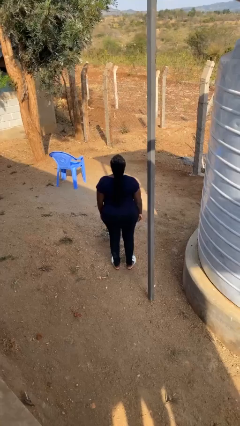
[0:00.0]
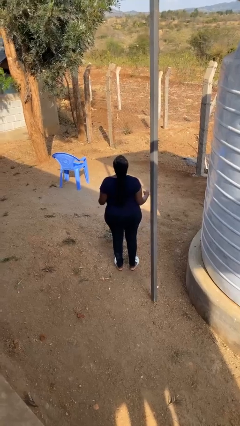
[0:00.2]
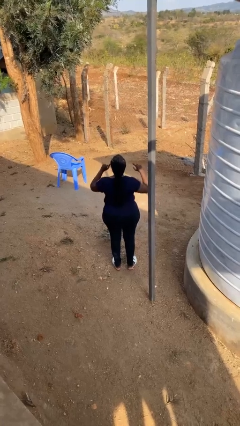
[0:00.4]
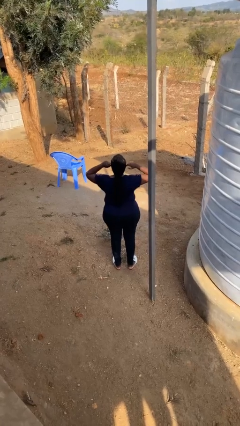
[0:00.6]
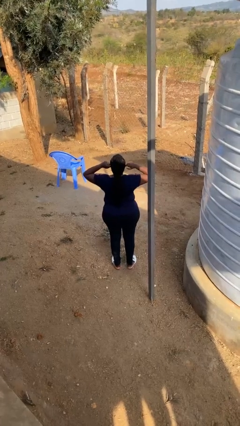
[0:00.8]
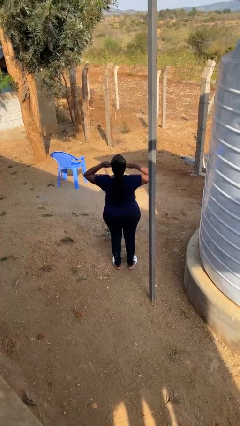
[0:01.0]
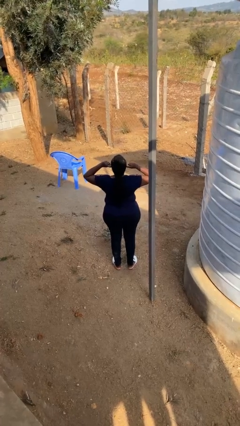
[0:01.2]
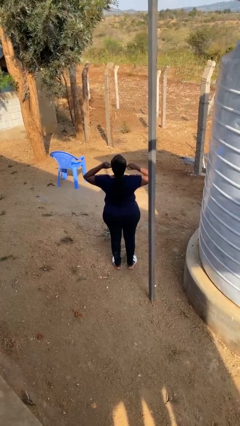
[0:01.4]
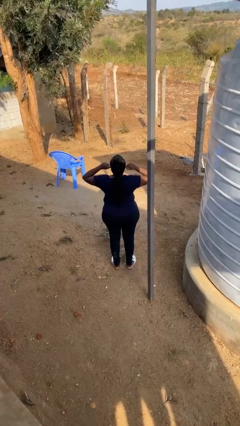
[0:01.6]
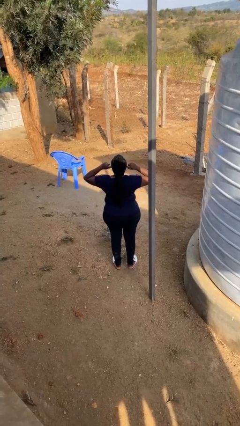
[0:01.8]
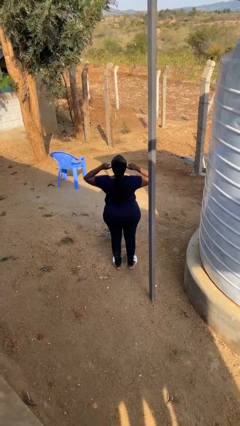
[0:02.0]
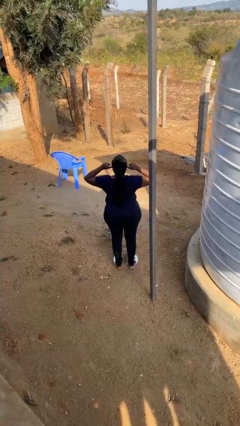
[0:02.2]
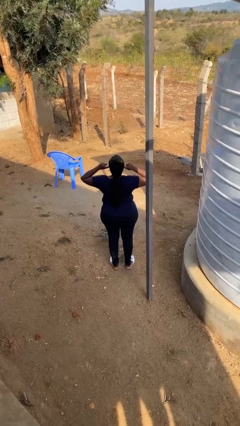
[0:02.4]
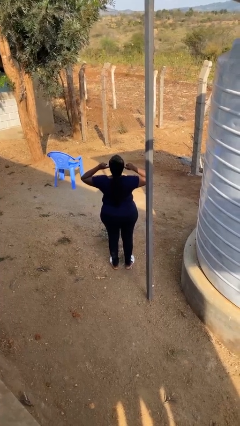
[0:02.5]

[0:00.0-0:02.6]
person puts fingers in ear

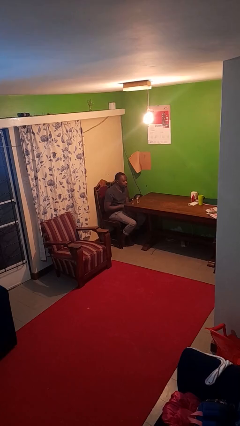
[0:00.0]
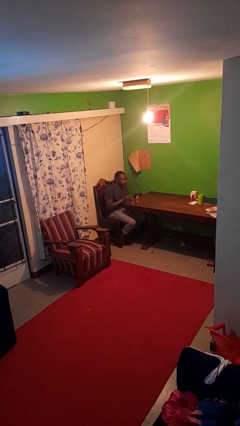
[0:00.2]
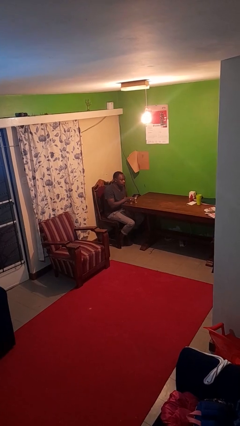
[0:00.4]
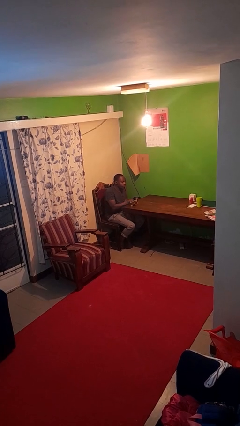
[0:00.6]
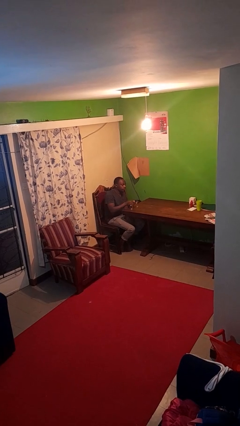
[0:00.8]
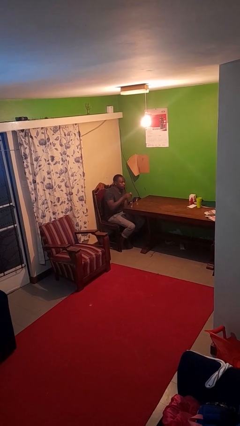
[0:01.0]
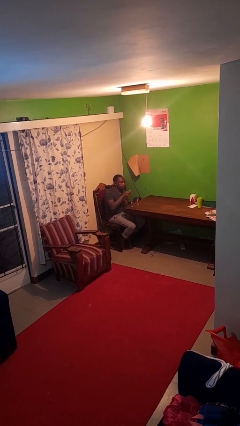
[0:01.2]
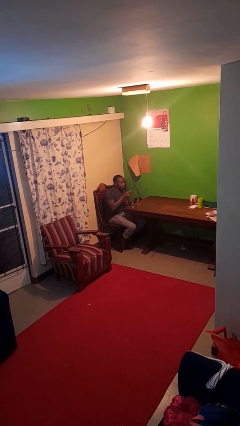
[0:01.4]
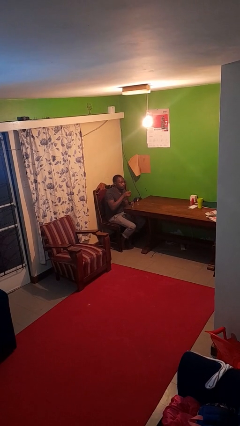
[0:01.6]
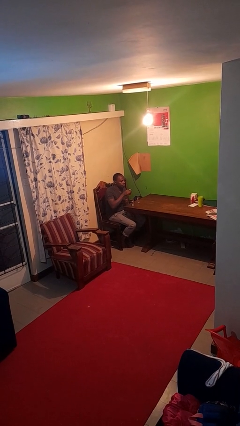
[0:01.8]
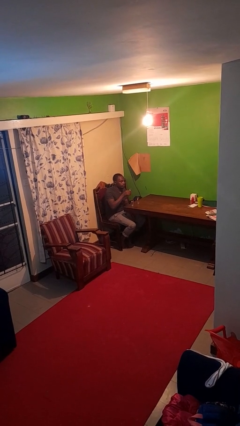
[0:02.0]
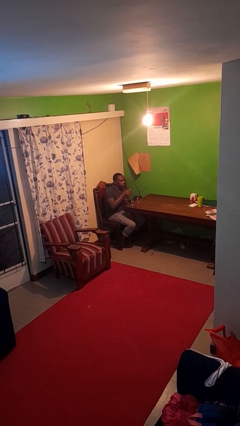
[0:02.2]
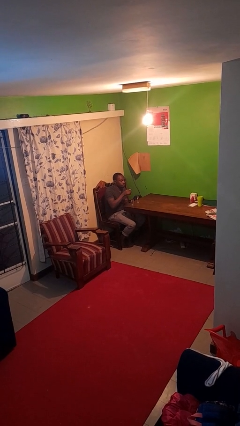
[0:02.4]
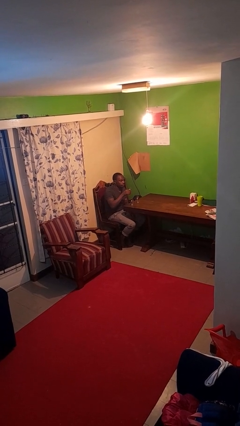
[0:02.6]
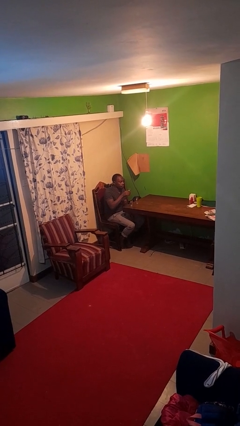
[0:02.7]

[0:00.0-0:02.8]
person picks up object from table

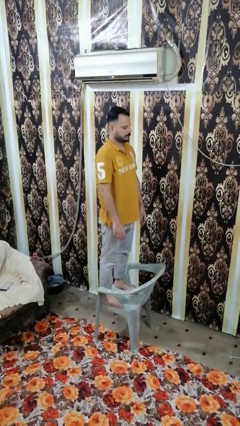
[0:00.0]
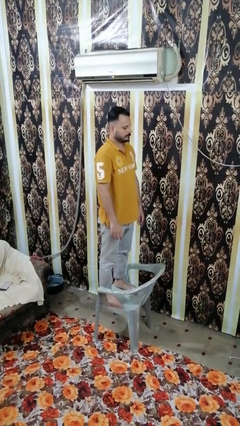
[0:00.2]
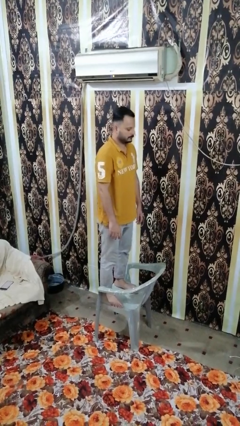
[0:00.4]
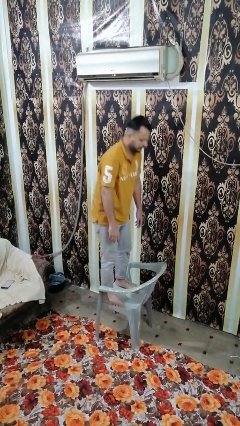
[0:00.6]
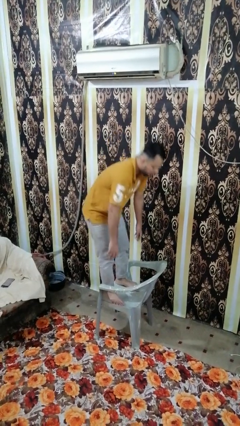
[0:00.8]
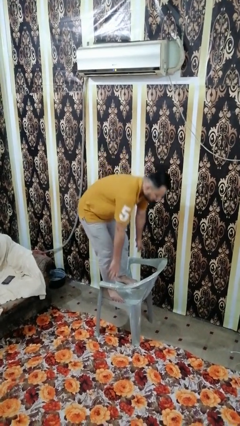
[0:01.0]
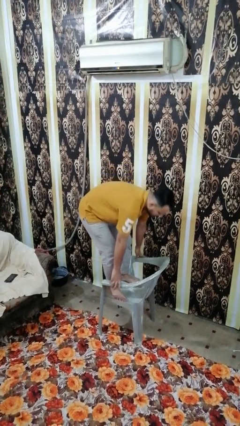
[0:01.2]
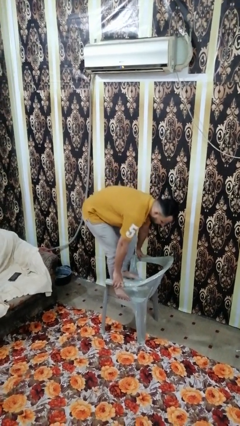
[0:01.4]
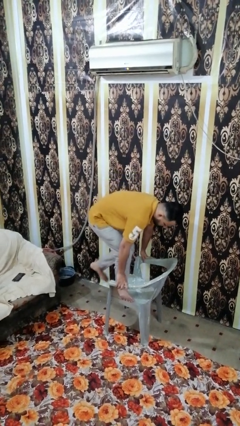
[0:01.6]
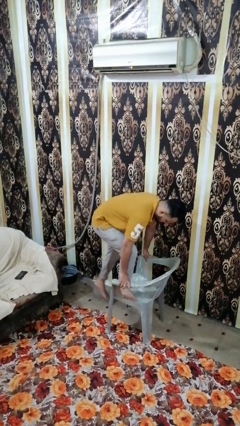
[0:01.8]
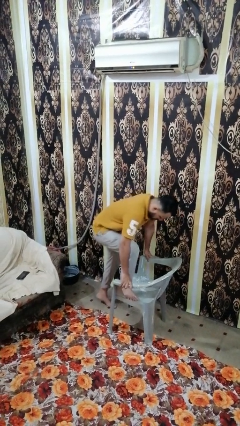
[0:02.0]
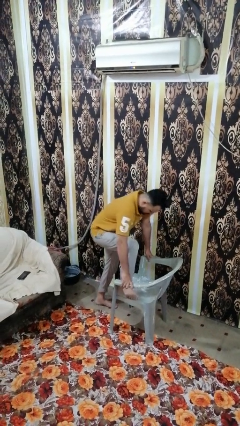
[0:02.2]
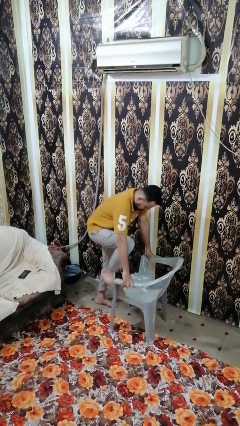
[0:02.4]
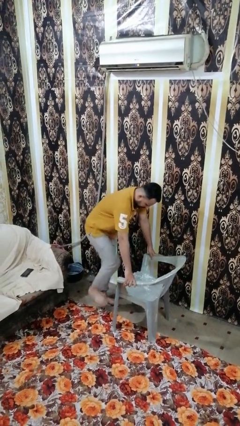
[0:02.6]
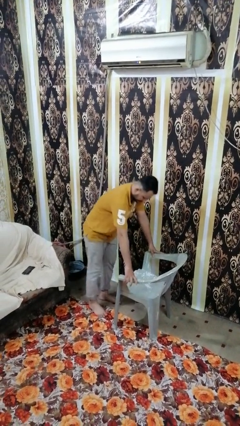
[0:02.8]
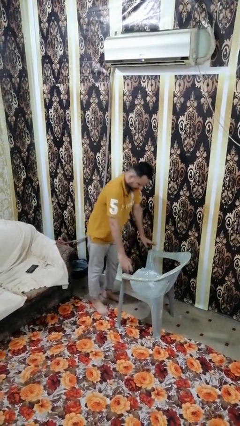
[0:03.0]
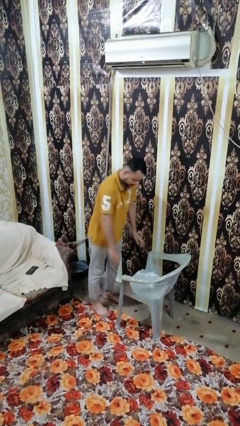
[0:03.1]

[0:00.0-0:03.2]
person climbs off chair

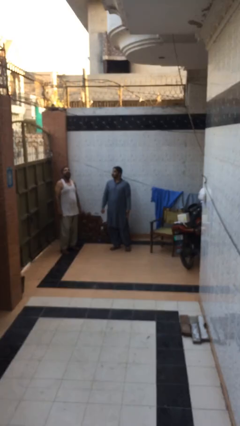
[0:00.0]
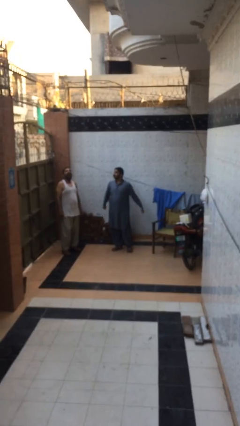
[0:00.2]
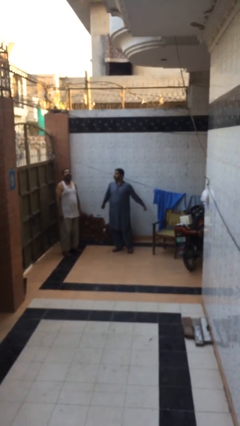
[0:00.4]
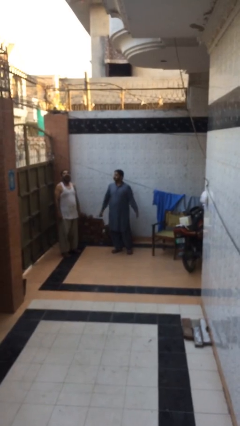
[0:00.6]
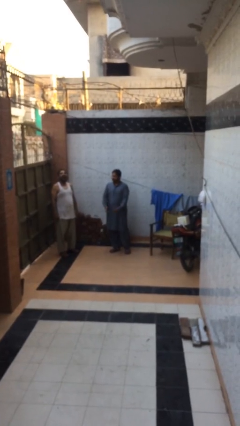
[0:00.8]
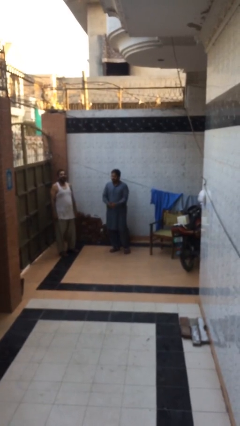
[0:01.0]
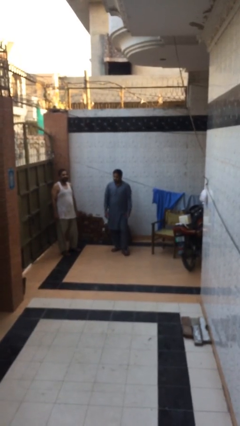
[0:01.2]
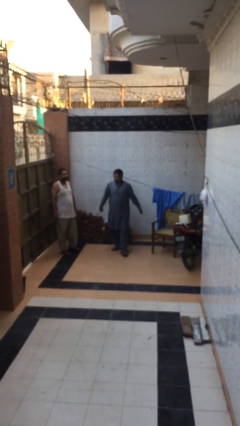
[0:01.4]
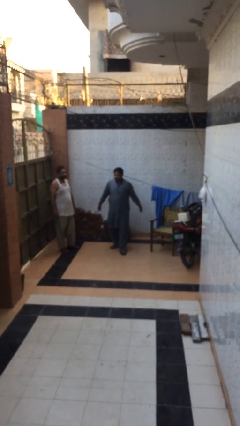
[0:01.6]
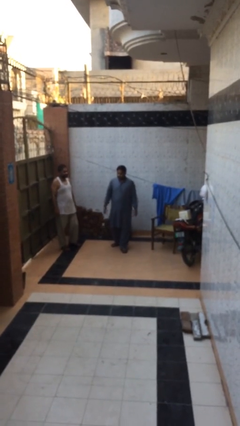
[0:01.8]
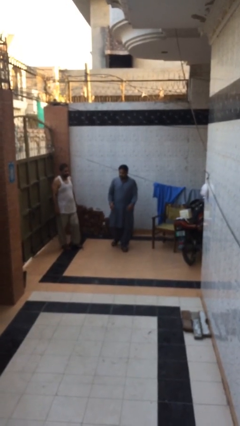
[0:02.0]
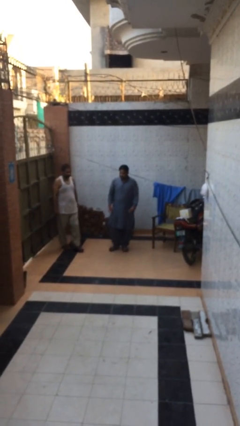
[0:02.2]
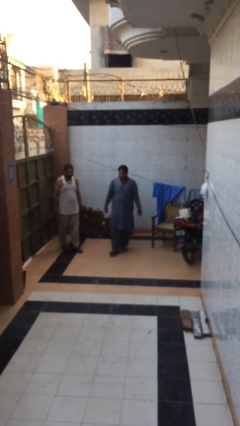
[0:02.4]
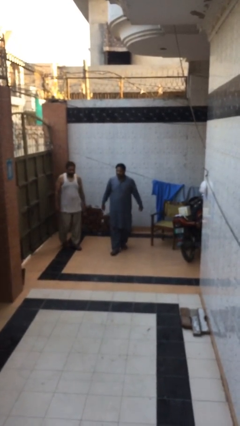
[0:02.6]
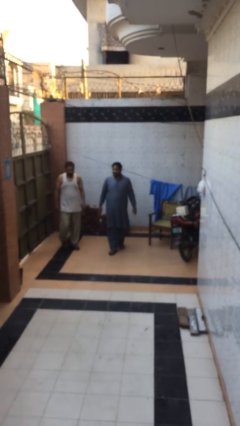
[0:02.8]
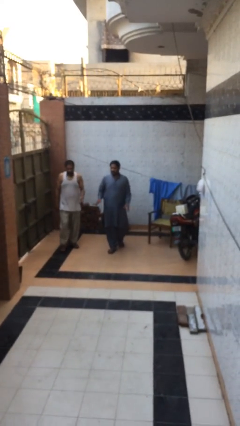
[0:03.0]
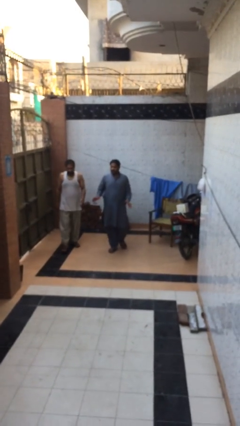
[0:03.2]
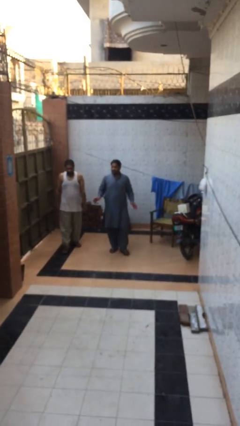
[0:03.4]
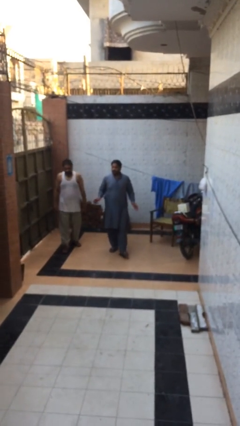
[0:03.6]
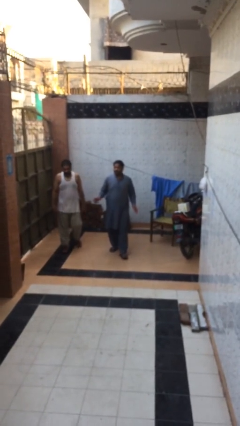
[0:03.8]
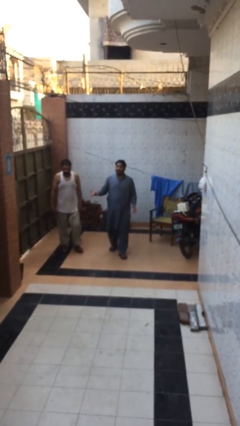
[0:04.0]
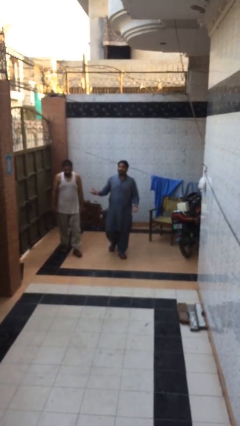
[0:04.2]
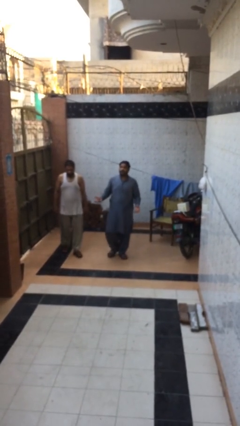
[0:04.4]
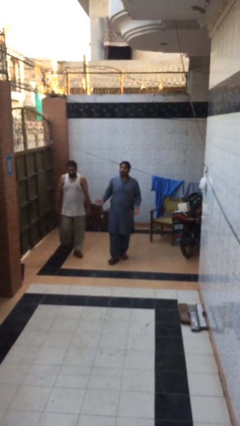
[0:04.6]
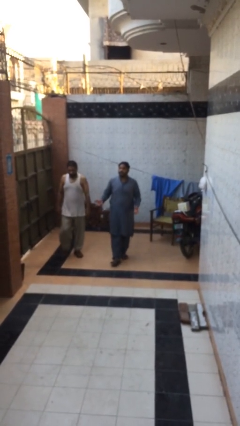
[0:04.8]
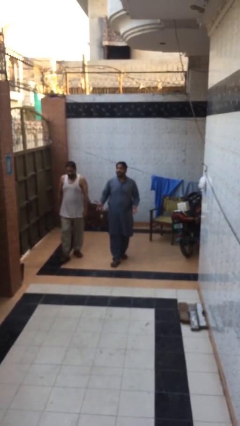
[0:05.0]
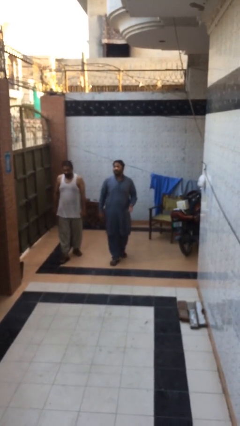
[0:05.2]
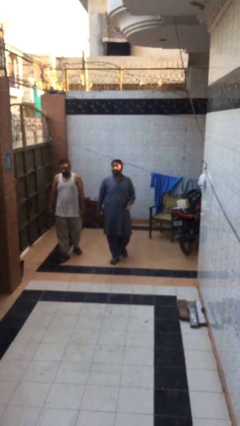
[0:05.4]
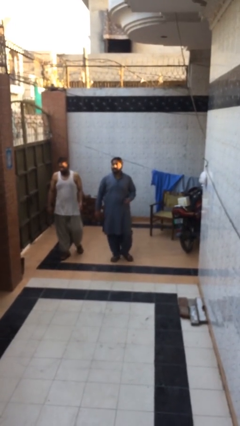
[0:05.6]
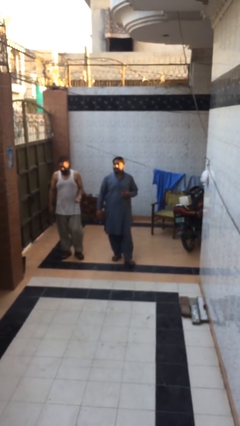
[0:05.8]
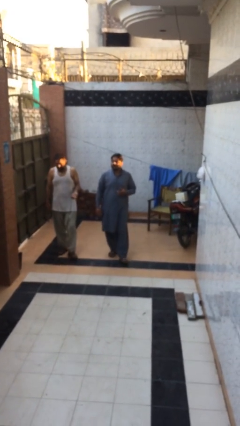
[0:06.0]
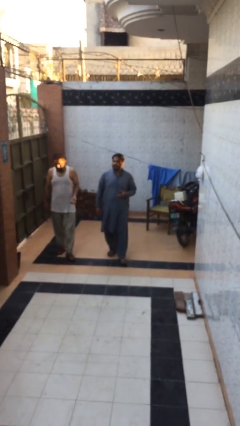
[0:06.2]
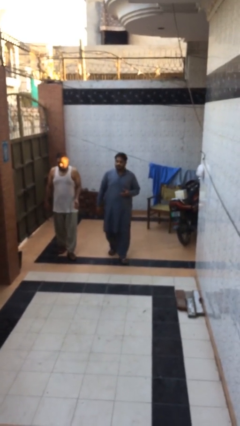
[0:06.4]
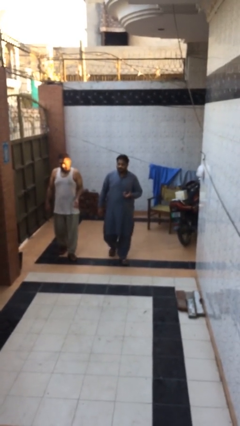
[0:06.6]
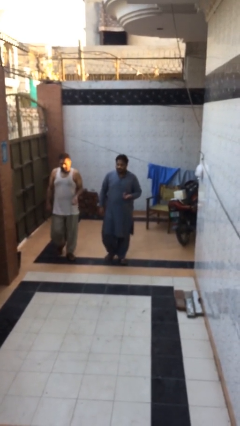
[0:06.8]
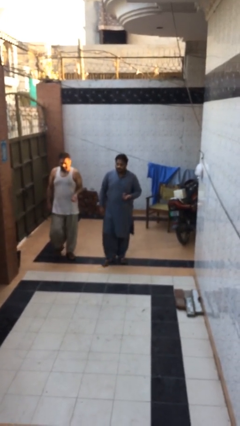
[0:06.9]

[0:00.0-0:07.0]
person talks to person

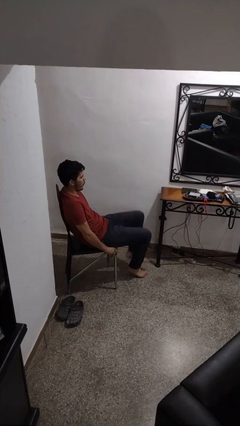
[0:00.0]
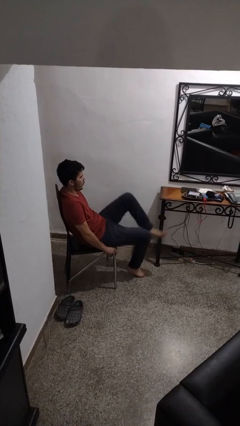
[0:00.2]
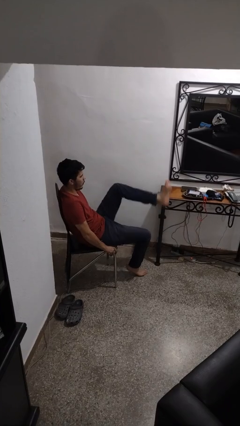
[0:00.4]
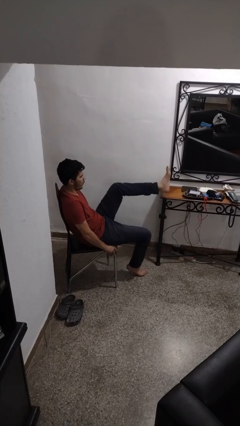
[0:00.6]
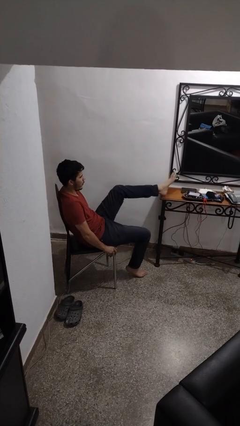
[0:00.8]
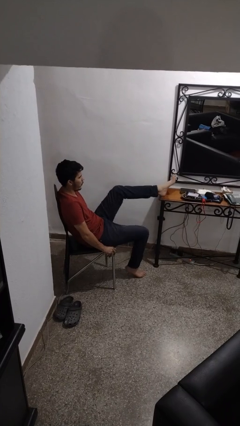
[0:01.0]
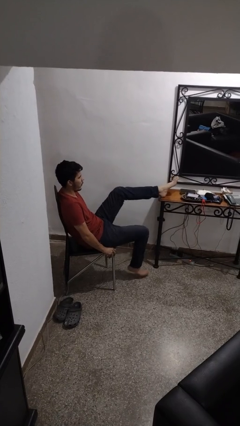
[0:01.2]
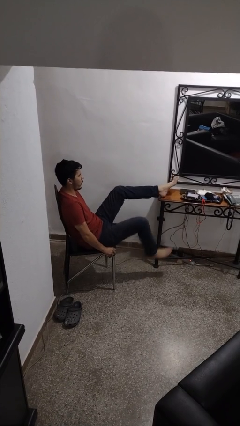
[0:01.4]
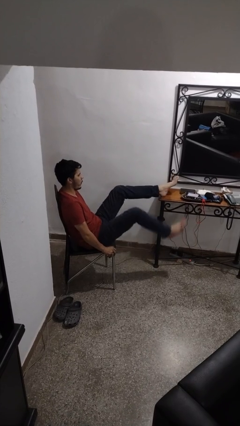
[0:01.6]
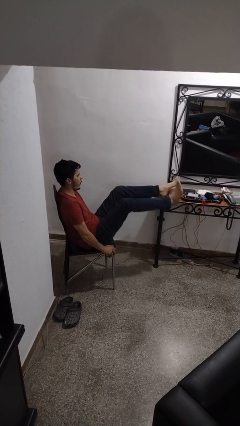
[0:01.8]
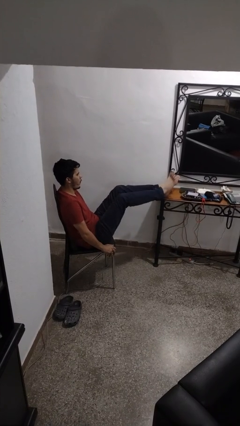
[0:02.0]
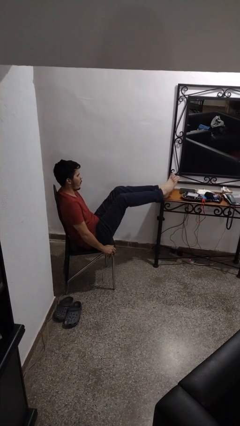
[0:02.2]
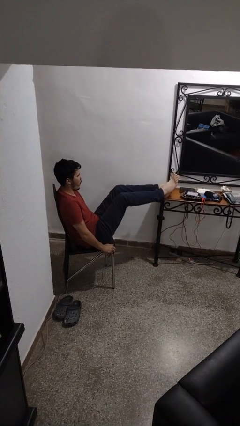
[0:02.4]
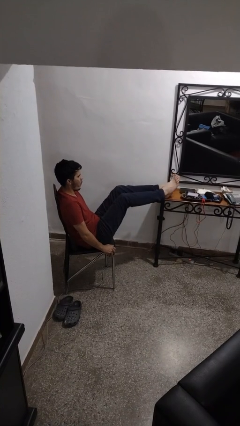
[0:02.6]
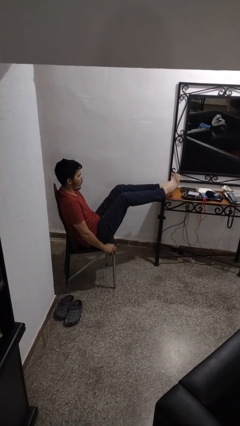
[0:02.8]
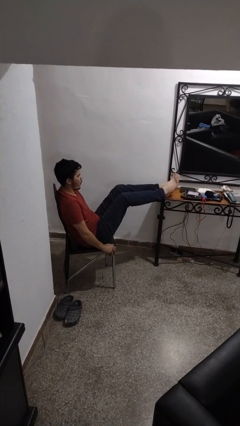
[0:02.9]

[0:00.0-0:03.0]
person puts feet up
